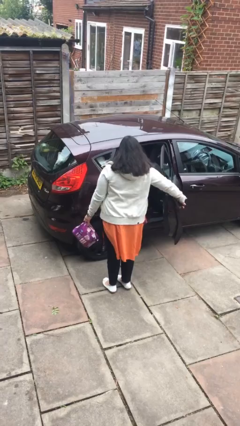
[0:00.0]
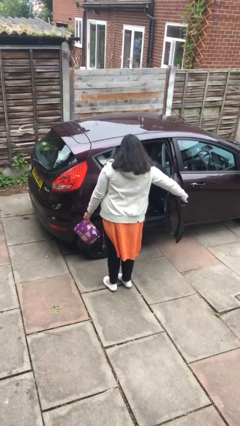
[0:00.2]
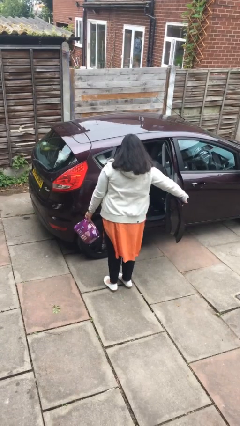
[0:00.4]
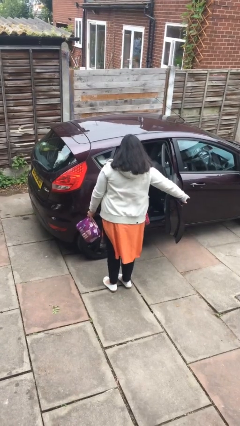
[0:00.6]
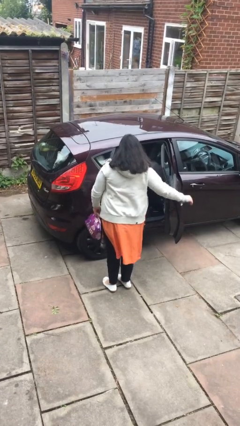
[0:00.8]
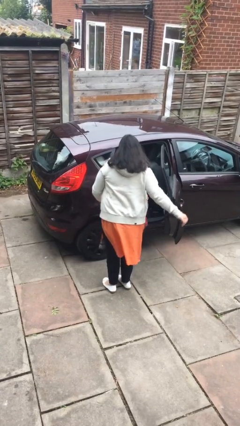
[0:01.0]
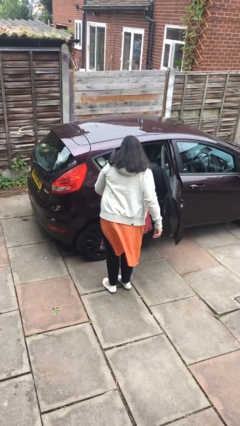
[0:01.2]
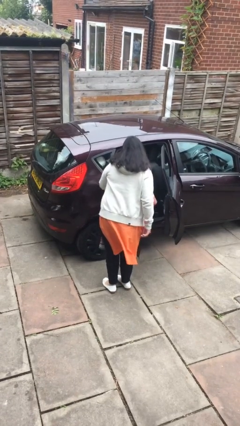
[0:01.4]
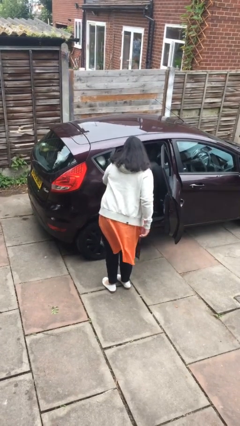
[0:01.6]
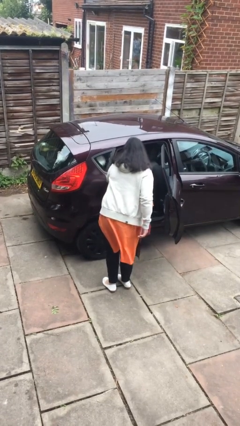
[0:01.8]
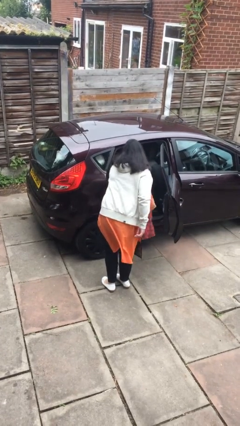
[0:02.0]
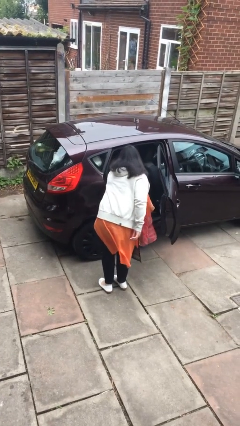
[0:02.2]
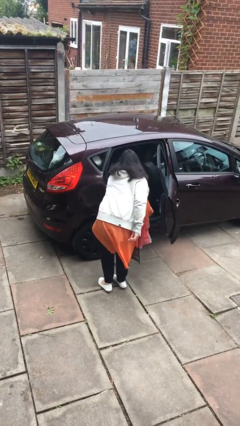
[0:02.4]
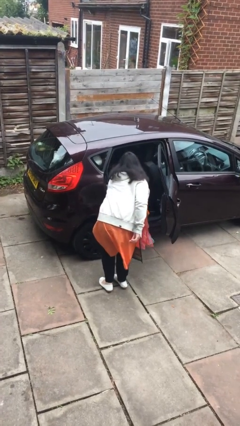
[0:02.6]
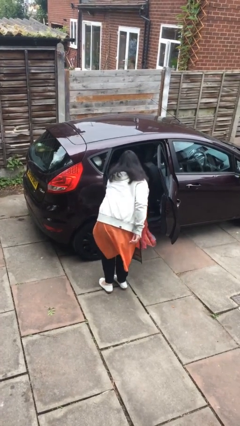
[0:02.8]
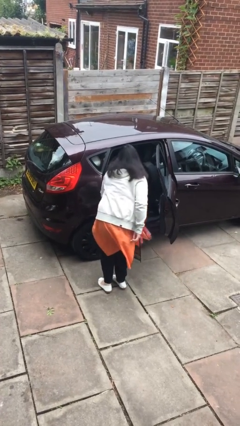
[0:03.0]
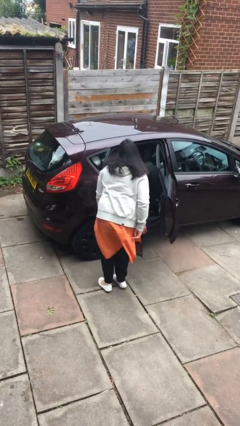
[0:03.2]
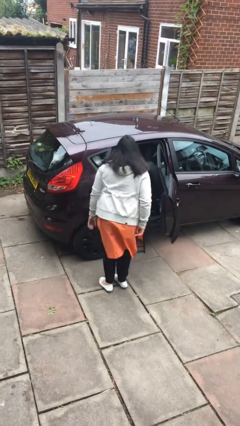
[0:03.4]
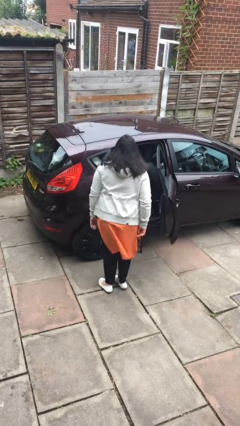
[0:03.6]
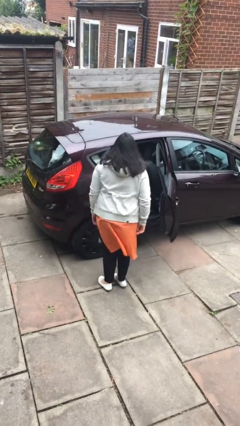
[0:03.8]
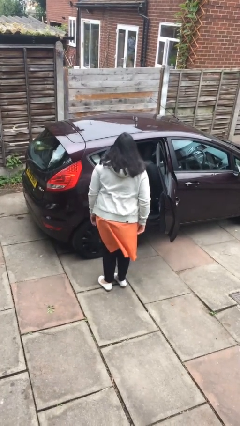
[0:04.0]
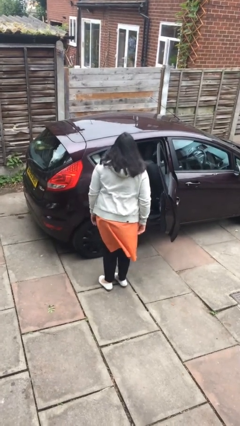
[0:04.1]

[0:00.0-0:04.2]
person loads car

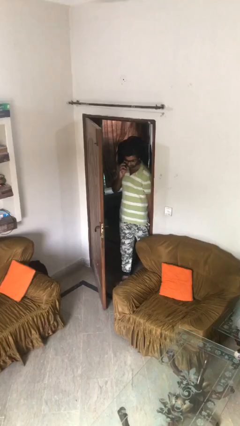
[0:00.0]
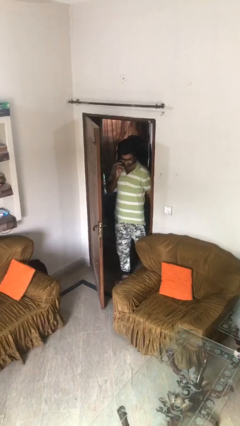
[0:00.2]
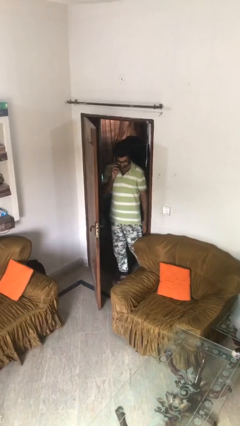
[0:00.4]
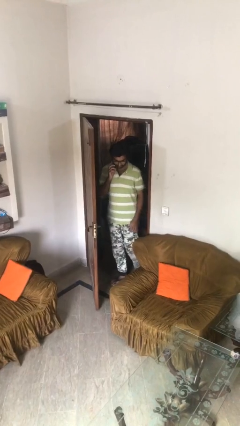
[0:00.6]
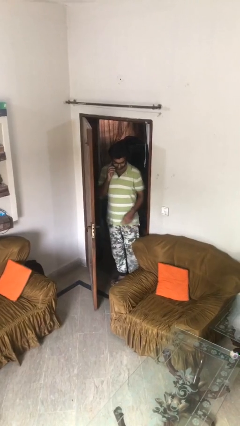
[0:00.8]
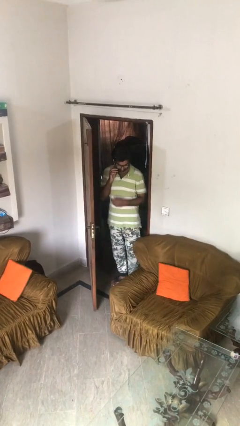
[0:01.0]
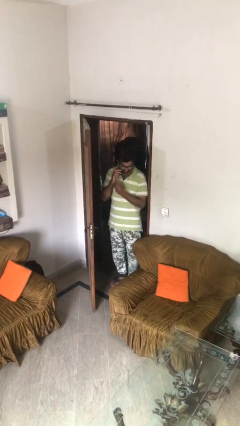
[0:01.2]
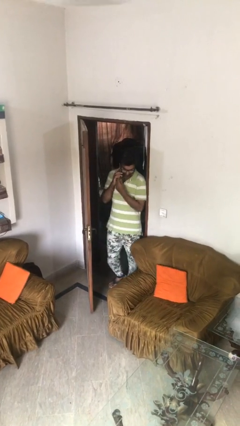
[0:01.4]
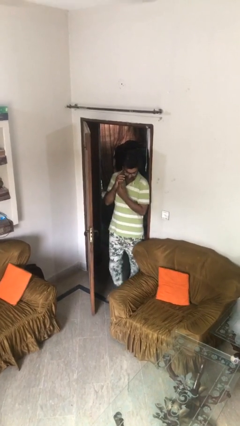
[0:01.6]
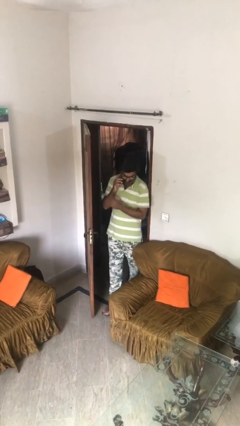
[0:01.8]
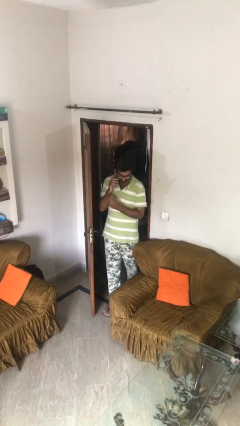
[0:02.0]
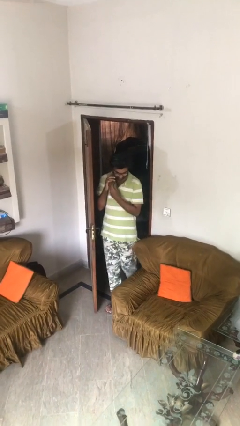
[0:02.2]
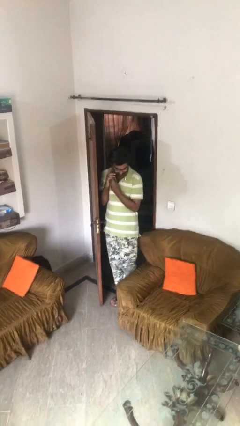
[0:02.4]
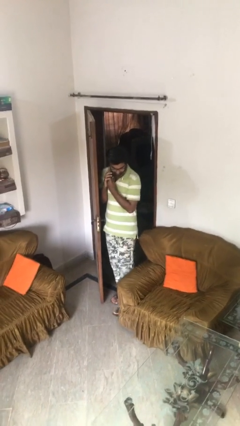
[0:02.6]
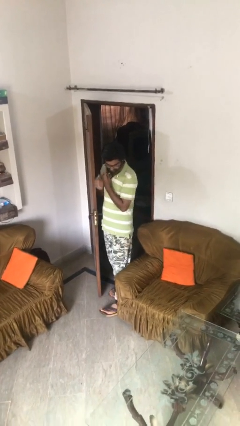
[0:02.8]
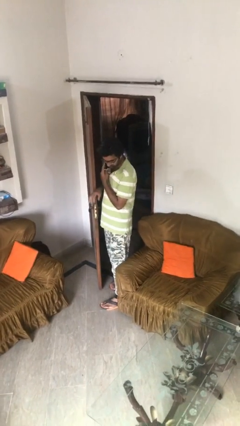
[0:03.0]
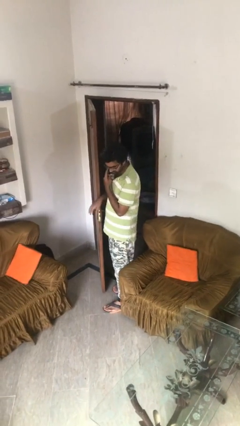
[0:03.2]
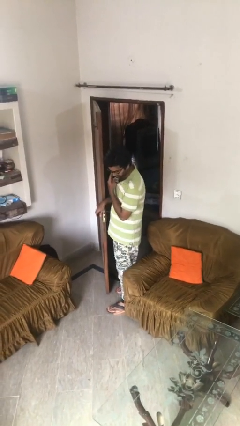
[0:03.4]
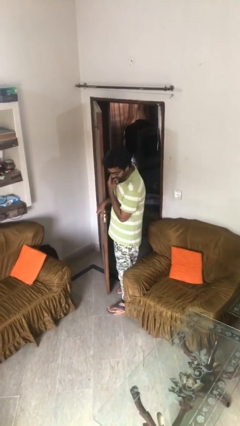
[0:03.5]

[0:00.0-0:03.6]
person enters scene through structure

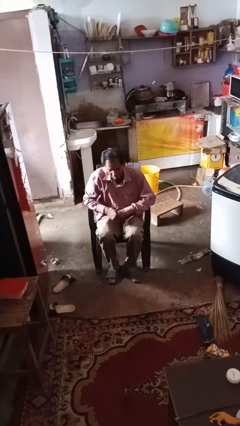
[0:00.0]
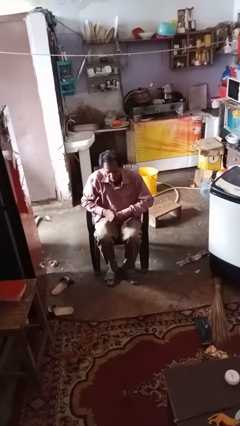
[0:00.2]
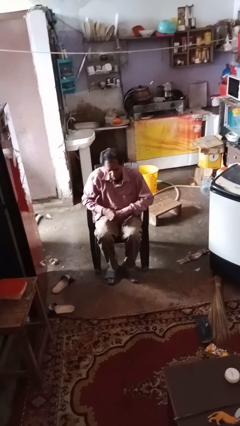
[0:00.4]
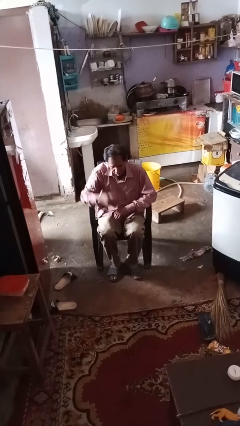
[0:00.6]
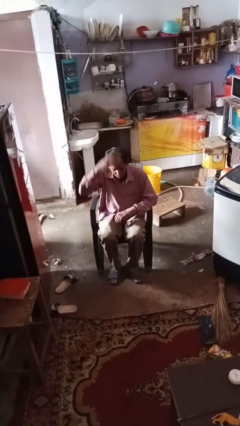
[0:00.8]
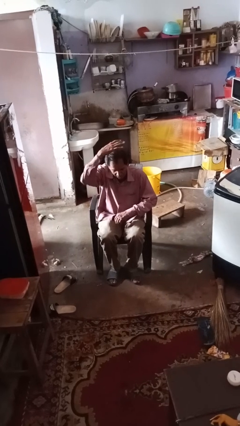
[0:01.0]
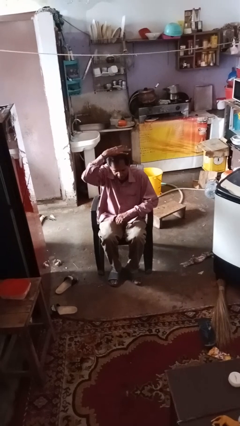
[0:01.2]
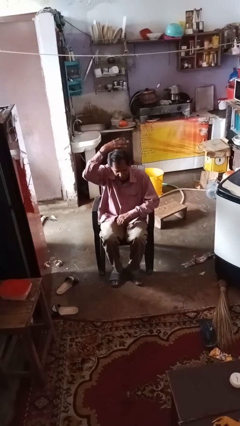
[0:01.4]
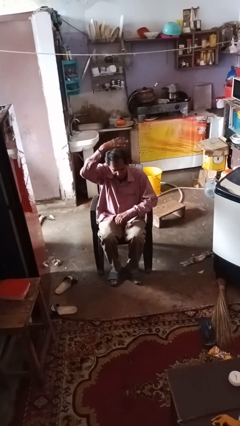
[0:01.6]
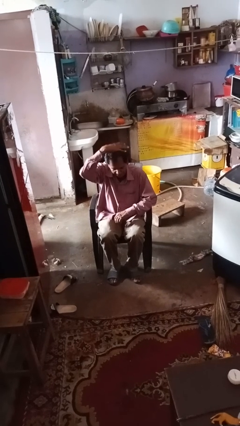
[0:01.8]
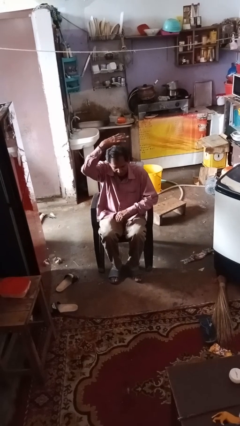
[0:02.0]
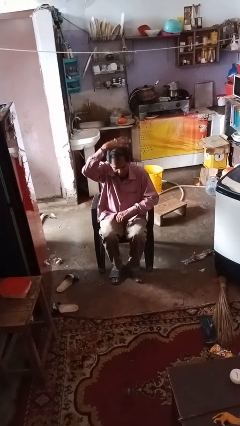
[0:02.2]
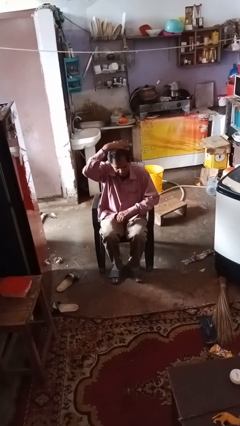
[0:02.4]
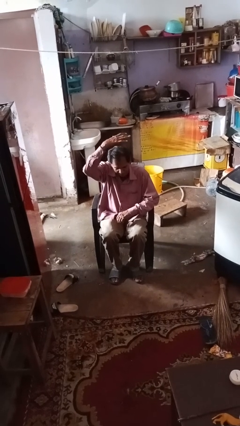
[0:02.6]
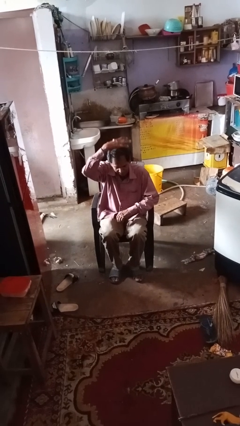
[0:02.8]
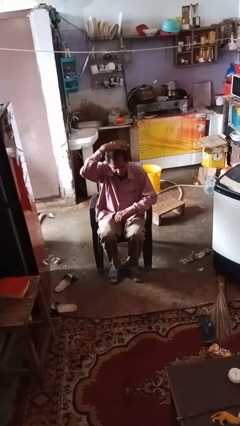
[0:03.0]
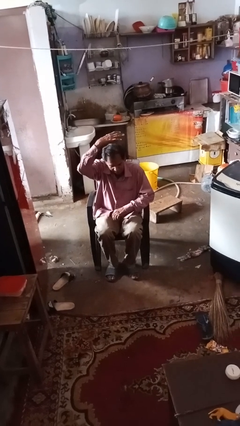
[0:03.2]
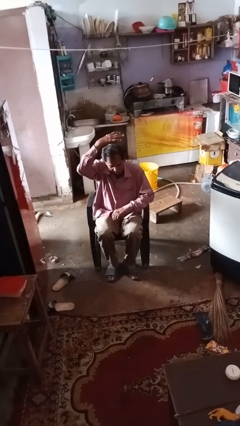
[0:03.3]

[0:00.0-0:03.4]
person holds object above head

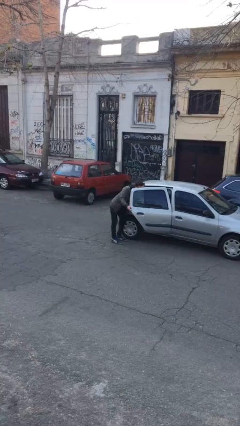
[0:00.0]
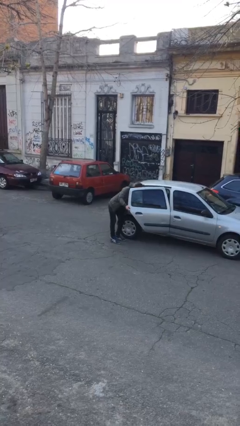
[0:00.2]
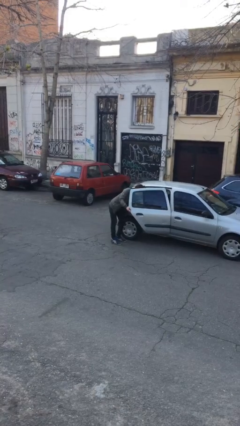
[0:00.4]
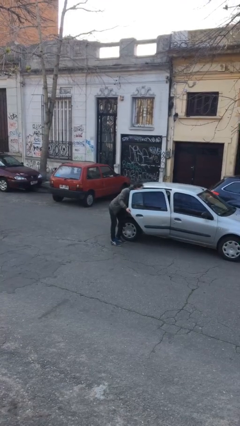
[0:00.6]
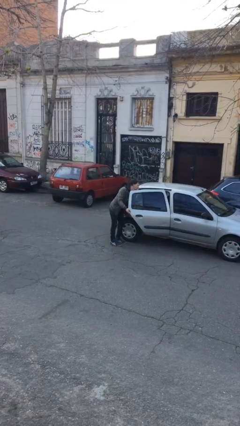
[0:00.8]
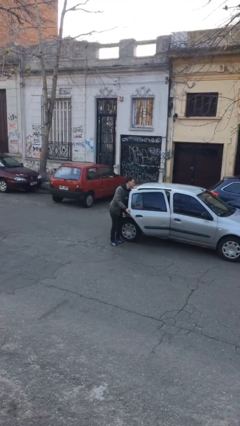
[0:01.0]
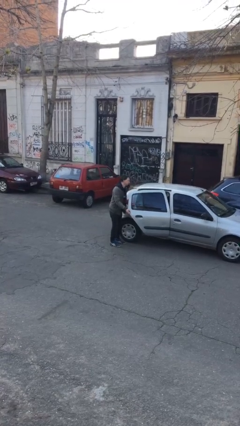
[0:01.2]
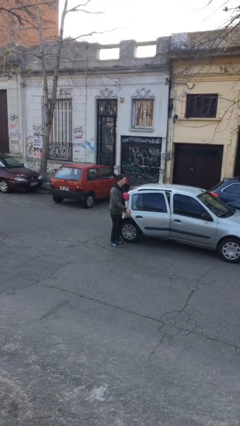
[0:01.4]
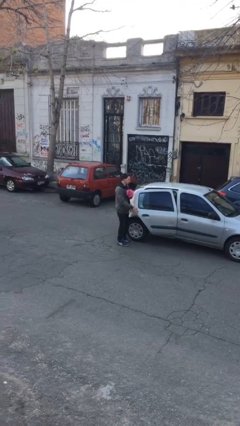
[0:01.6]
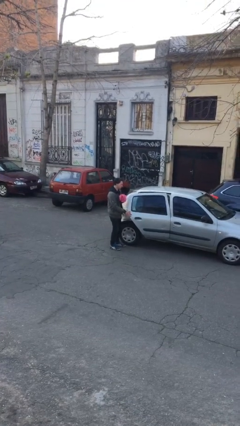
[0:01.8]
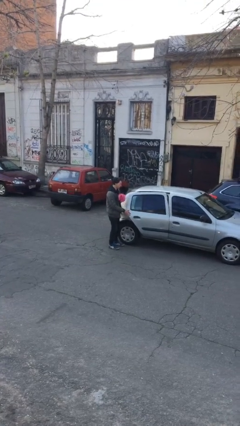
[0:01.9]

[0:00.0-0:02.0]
person unloads car

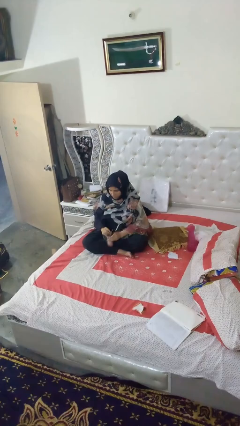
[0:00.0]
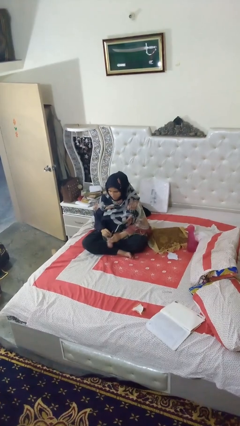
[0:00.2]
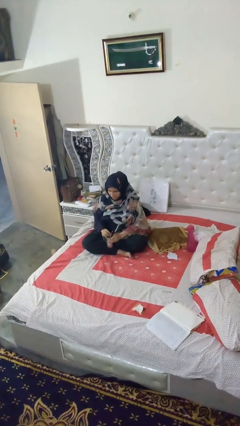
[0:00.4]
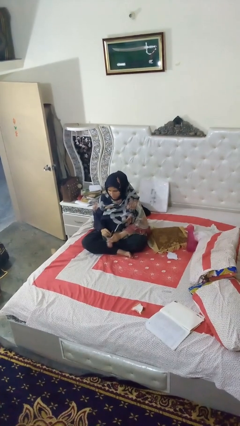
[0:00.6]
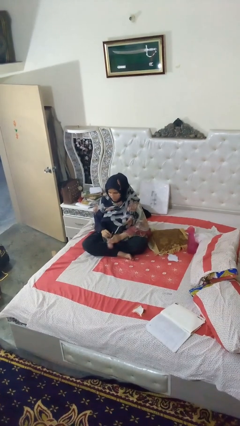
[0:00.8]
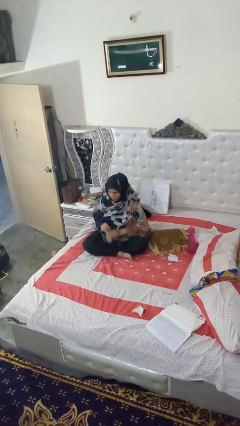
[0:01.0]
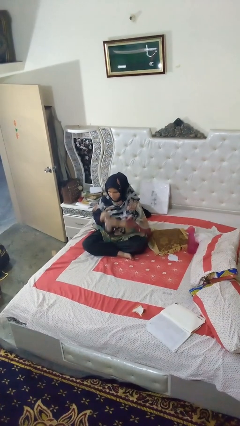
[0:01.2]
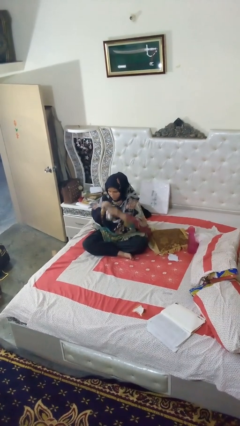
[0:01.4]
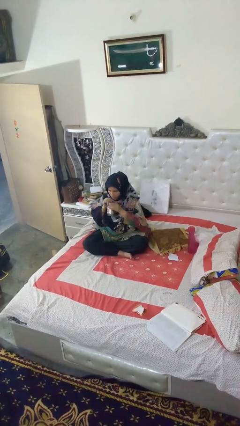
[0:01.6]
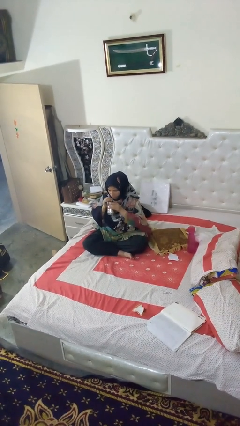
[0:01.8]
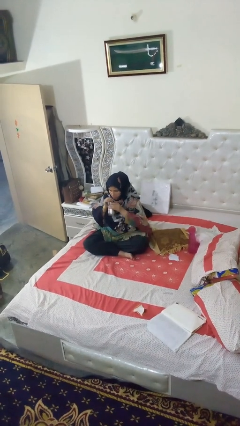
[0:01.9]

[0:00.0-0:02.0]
person drinks from straw

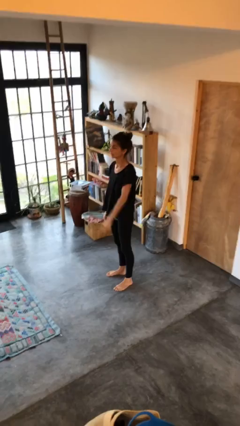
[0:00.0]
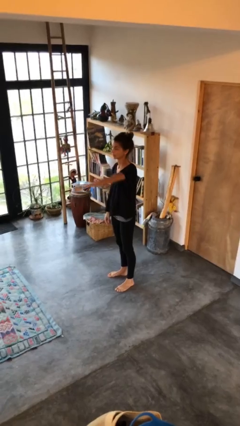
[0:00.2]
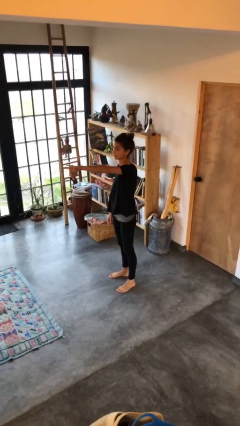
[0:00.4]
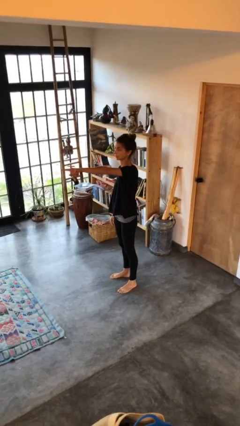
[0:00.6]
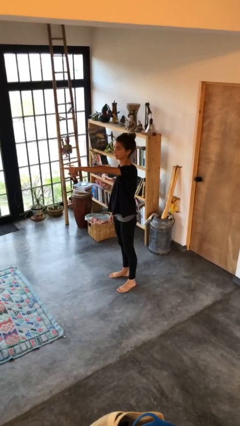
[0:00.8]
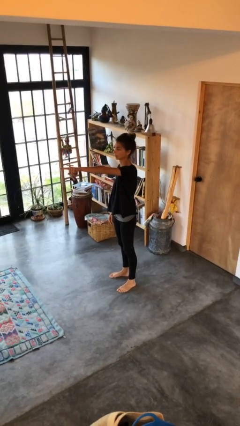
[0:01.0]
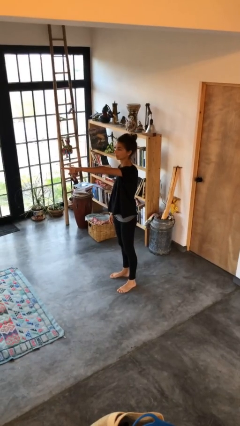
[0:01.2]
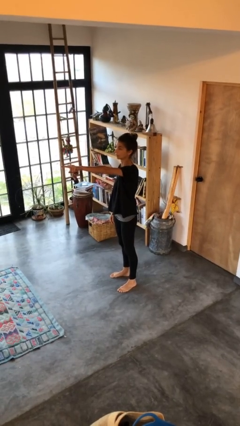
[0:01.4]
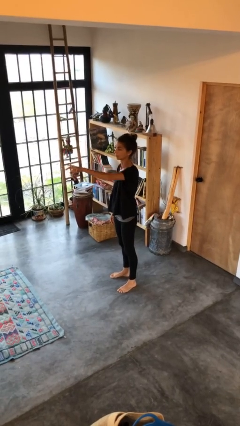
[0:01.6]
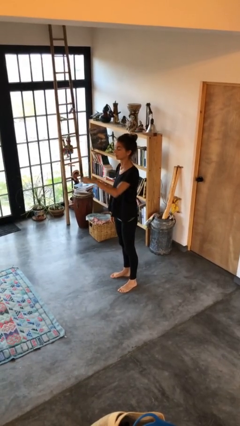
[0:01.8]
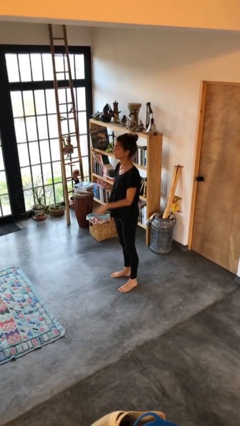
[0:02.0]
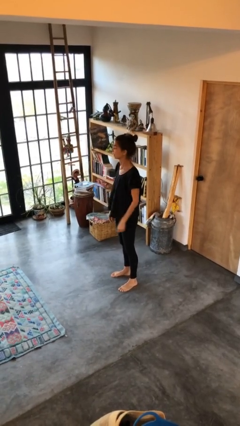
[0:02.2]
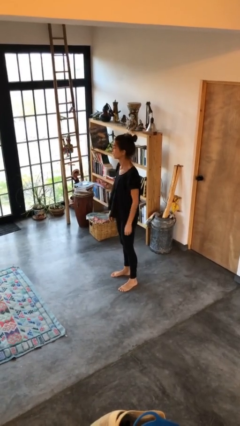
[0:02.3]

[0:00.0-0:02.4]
person points at person
